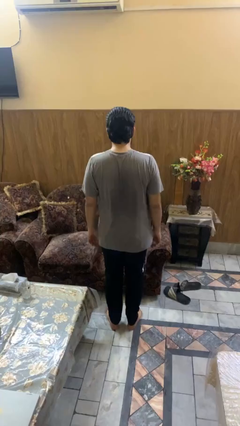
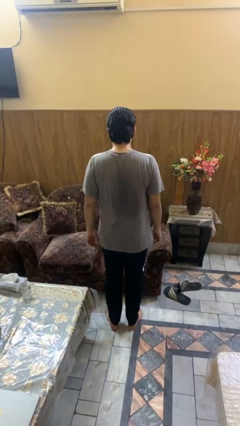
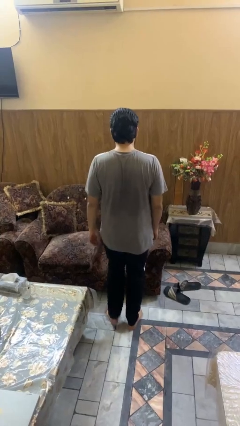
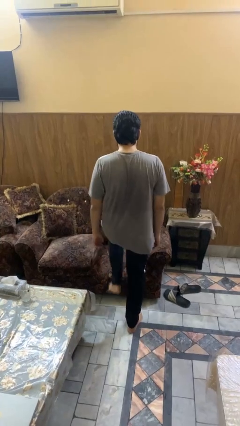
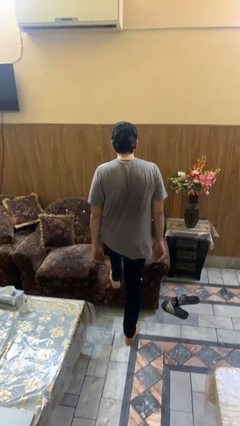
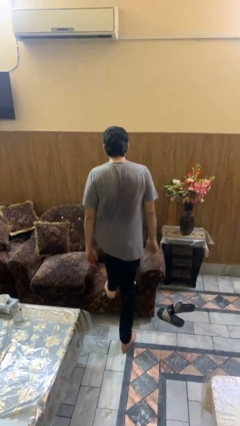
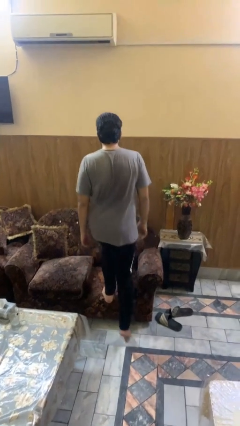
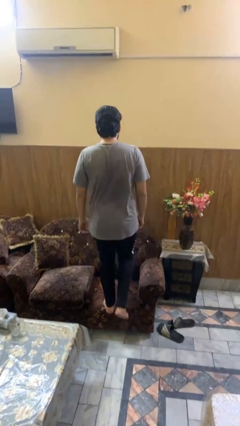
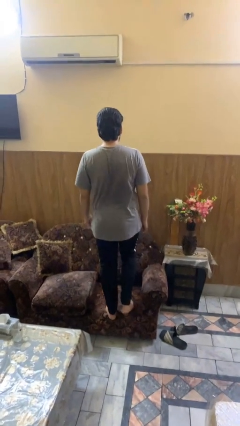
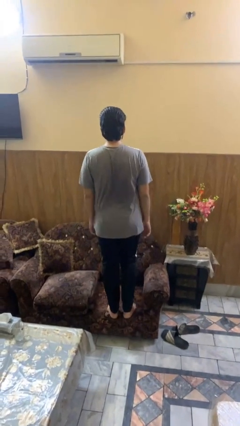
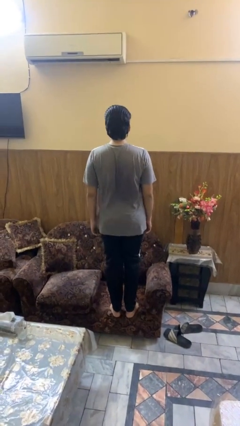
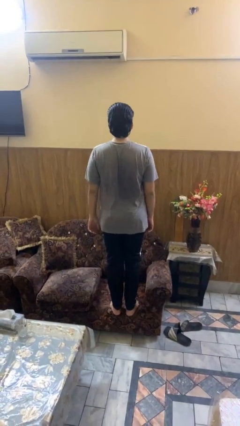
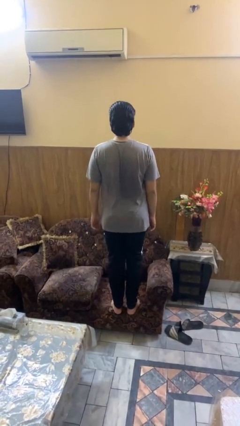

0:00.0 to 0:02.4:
person climbs on couch

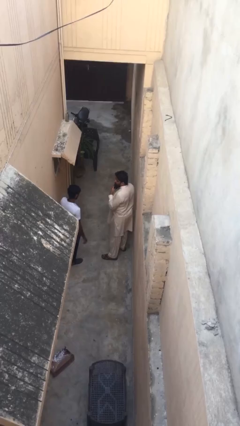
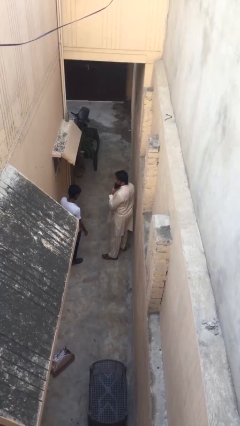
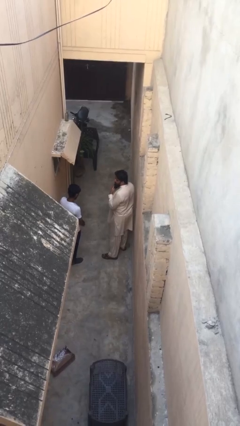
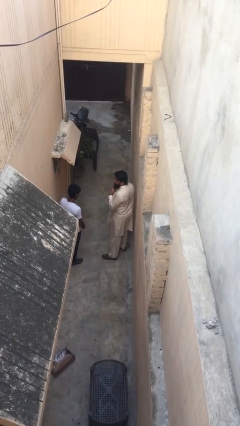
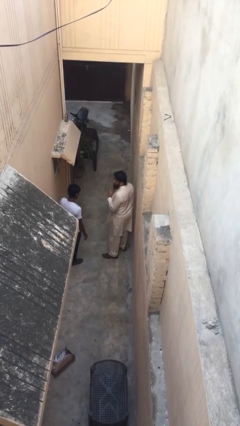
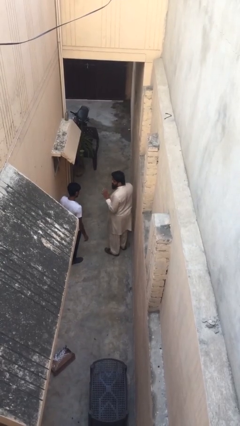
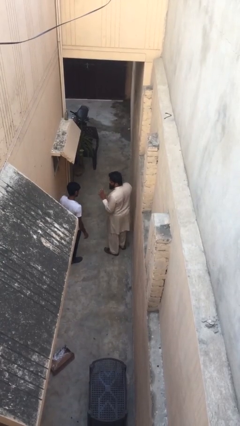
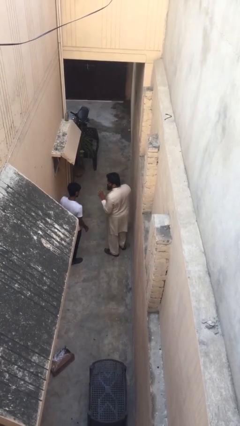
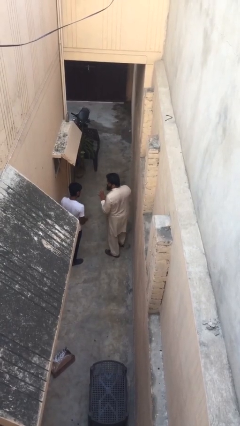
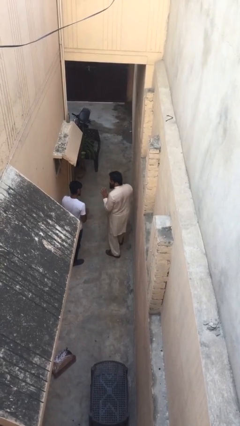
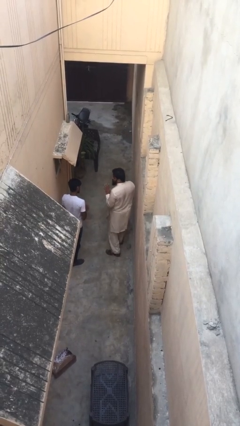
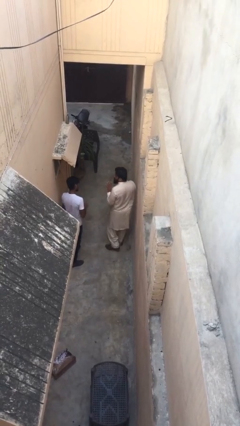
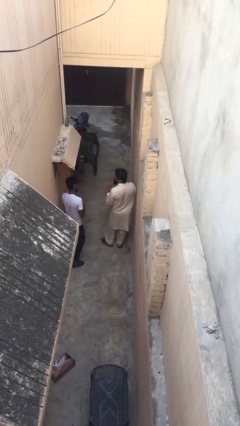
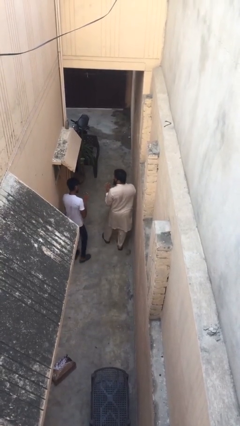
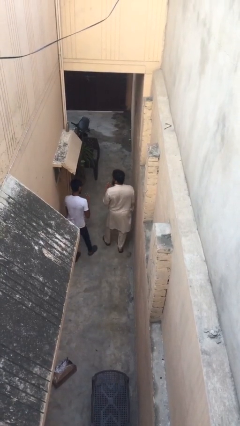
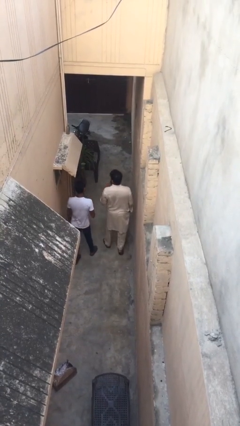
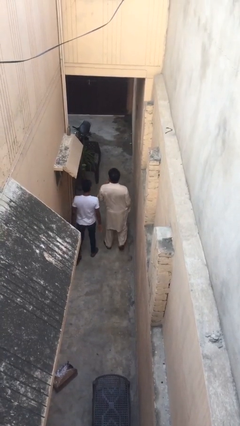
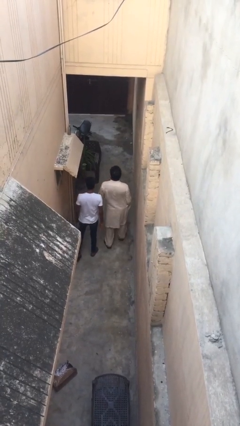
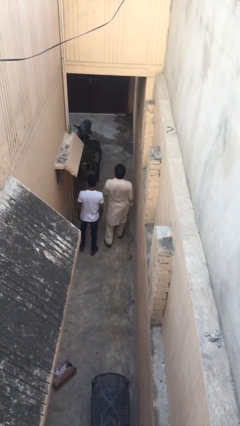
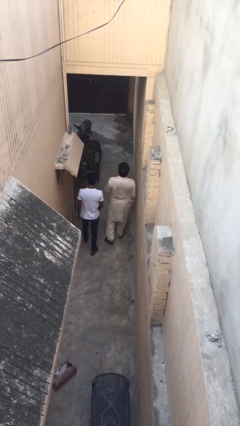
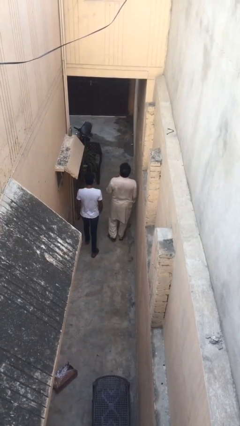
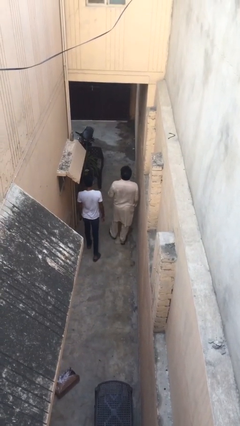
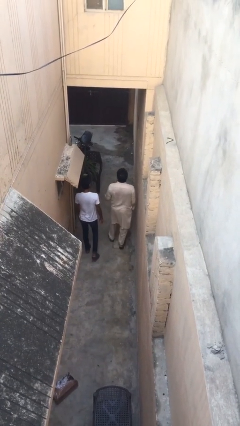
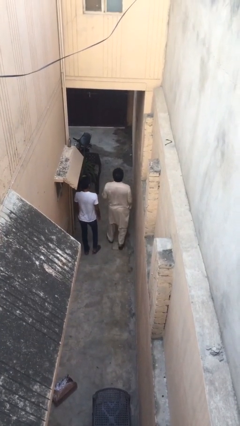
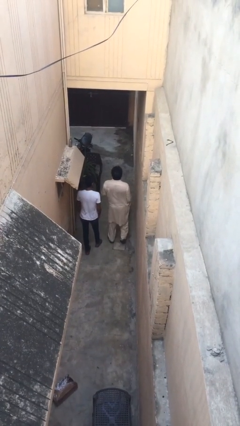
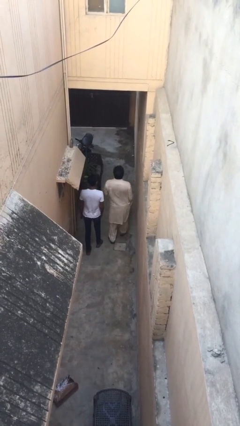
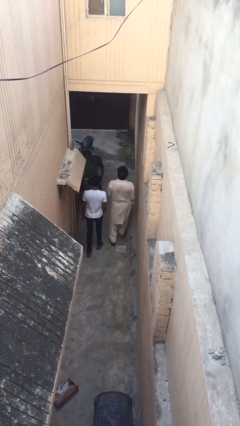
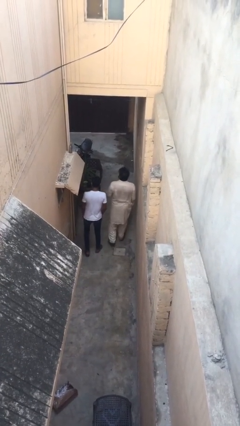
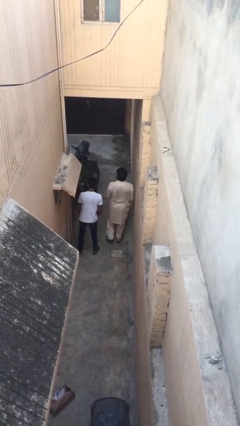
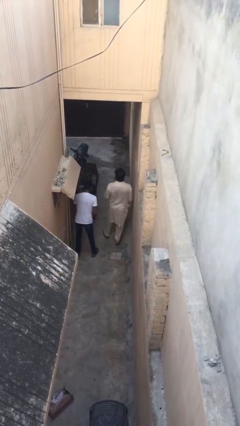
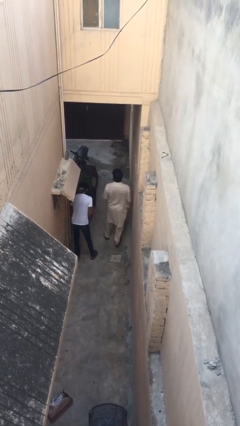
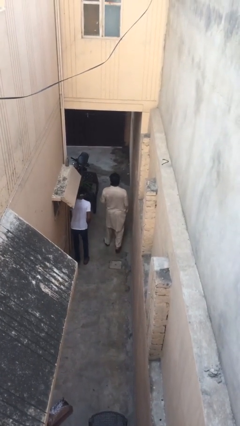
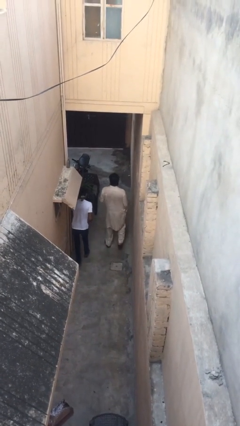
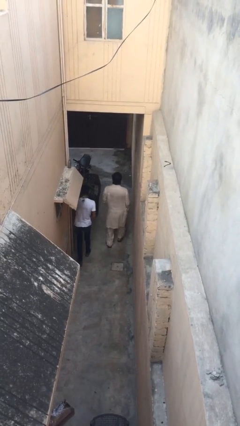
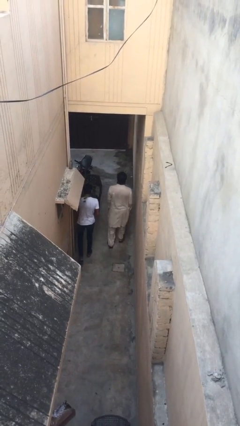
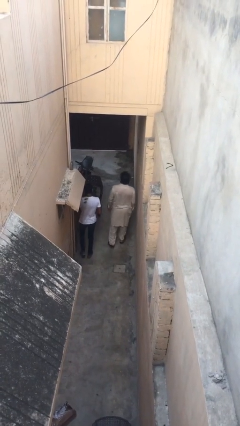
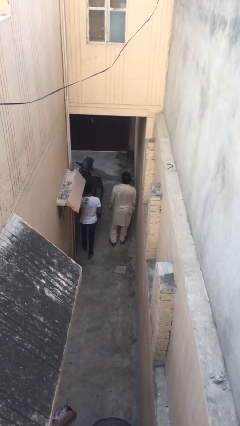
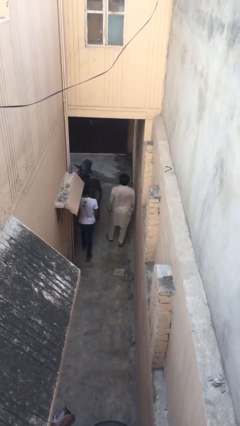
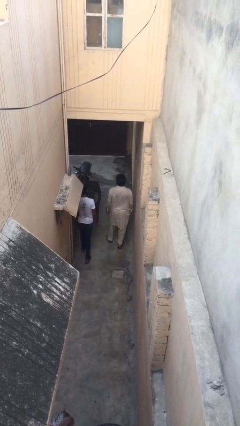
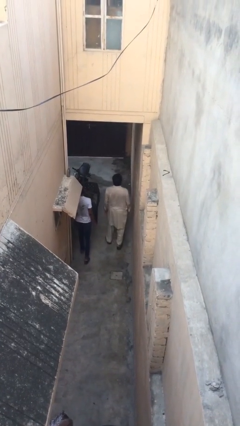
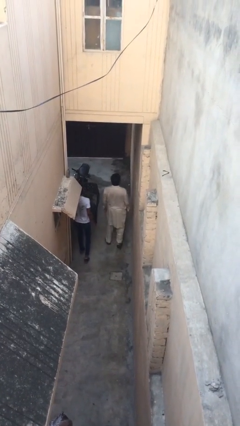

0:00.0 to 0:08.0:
person talks to person

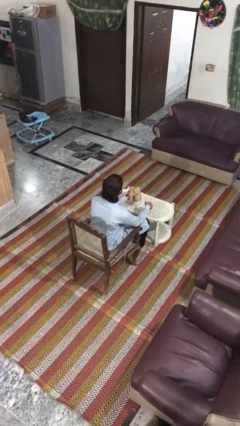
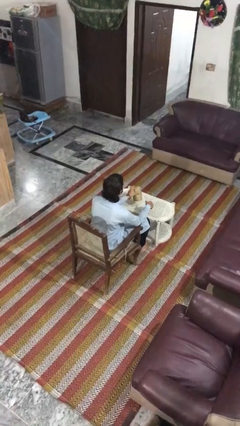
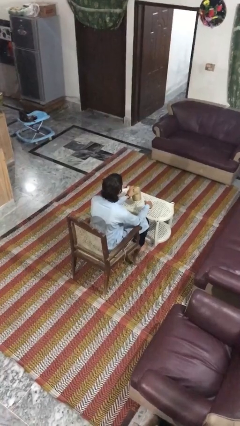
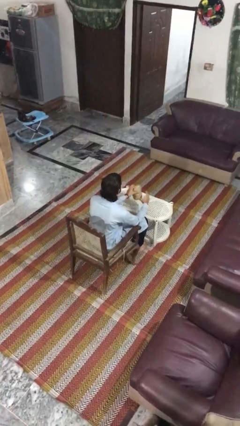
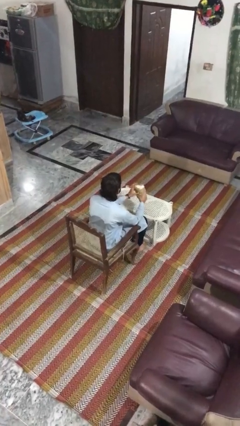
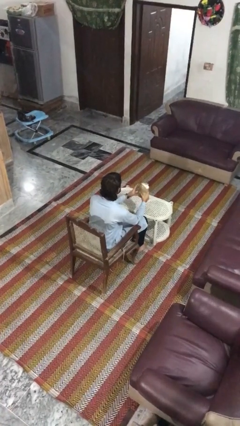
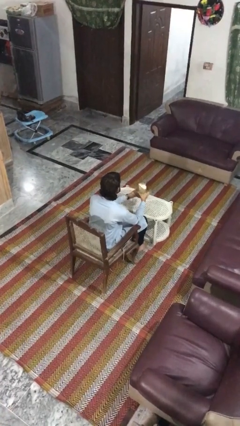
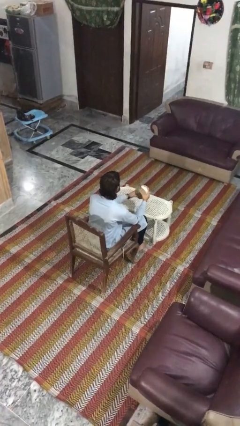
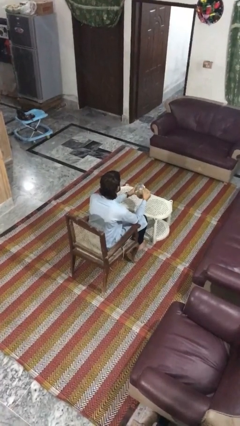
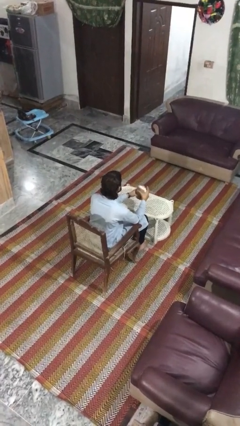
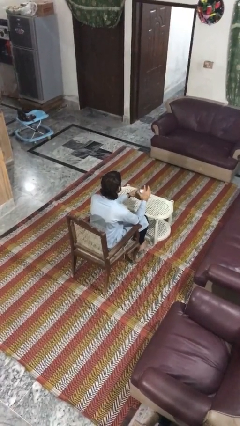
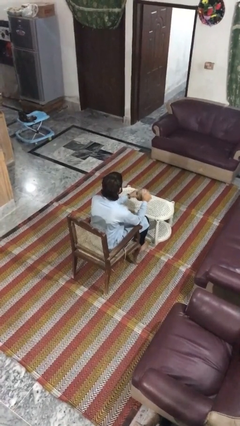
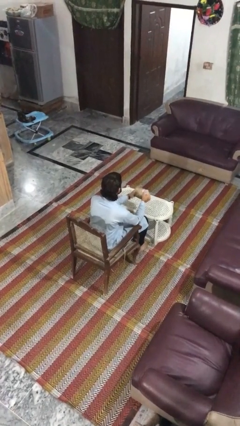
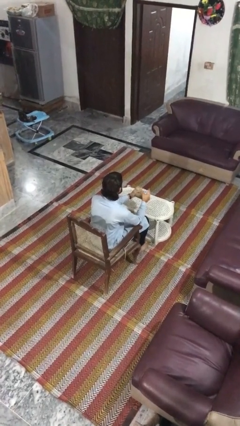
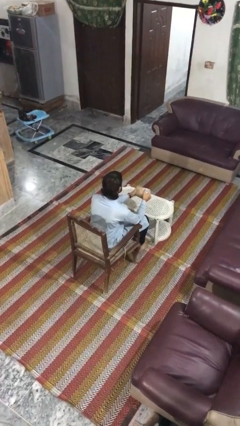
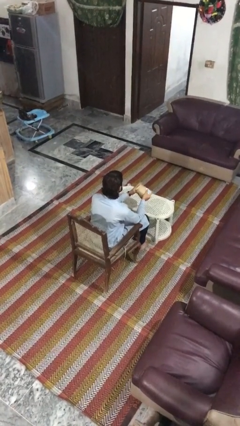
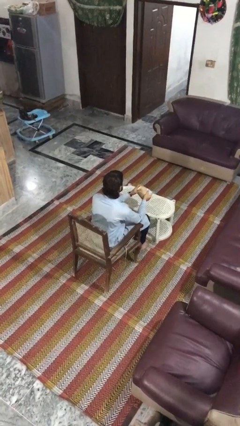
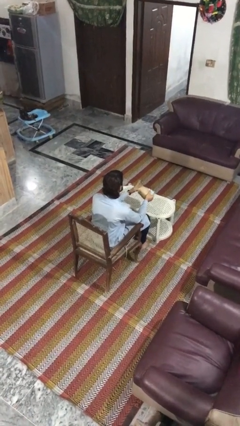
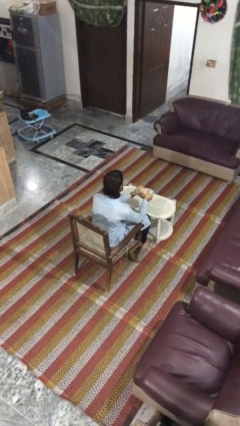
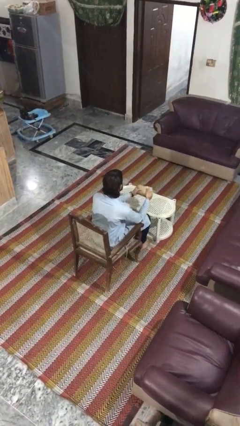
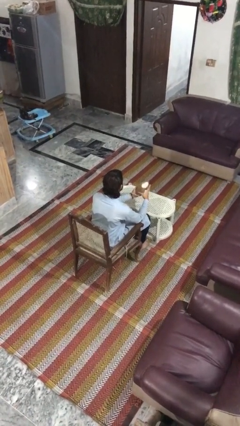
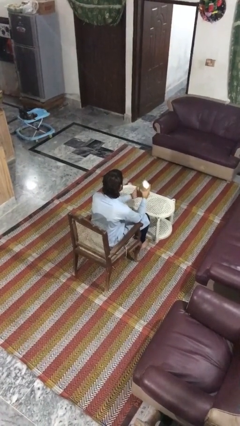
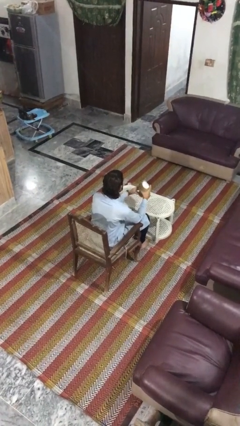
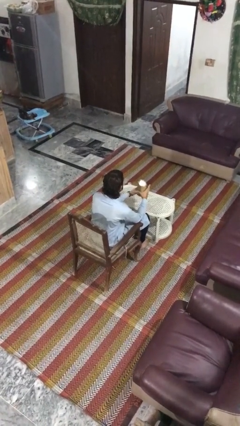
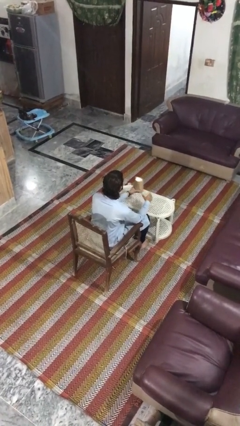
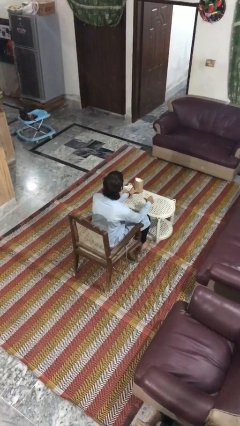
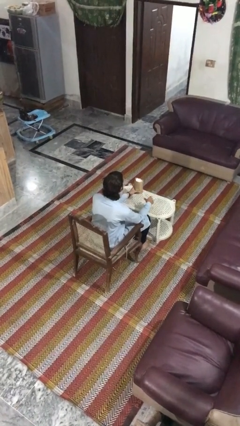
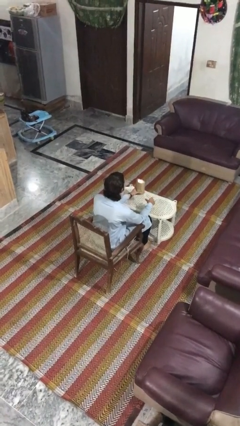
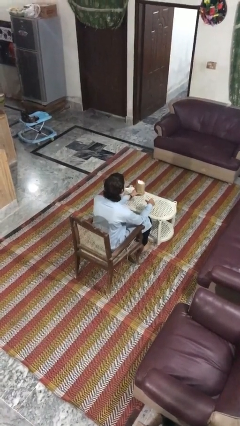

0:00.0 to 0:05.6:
person squeezes object

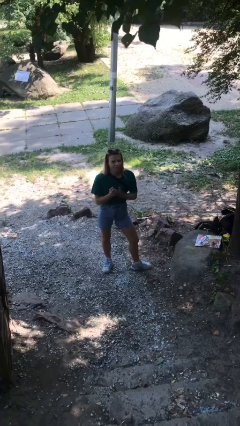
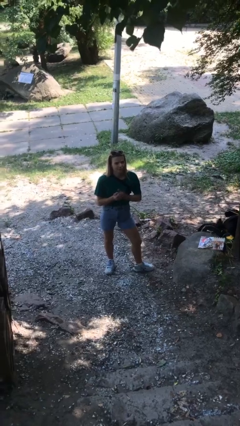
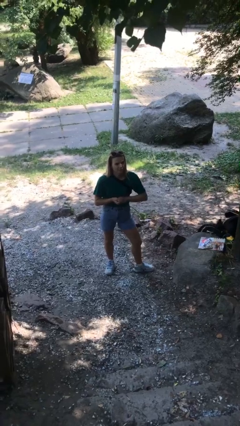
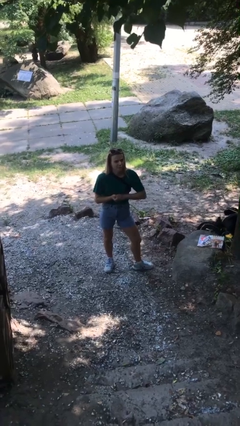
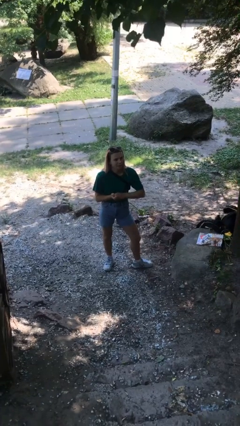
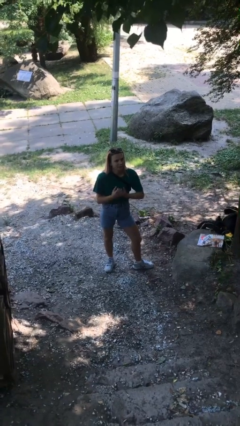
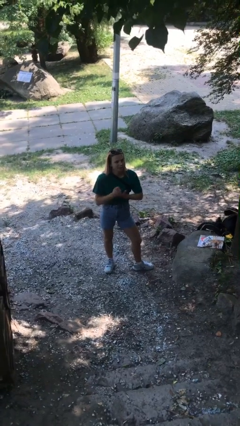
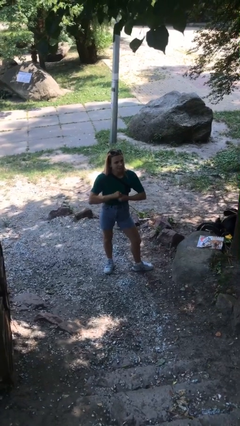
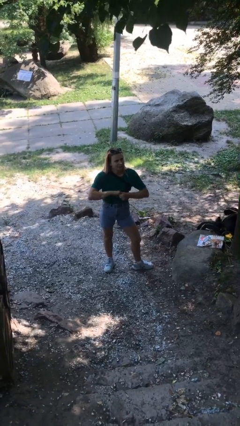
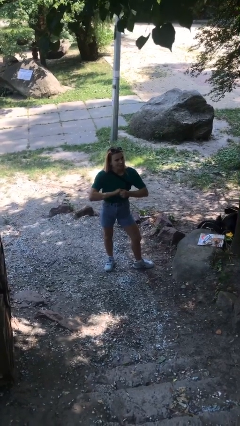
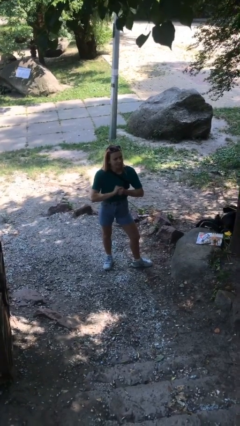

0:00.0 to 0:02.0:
person cracks knuckles
